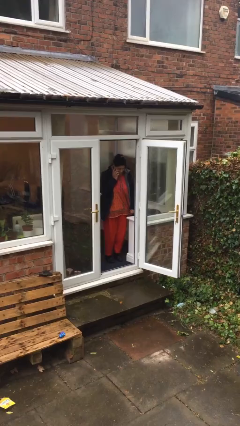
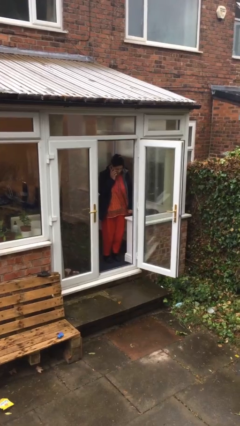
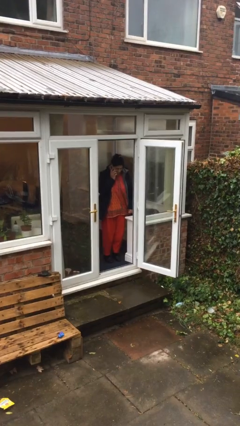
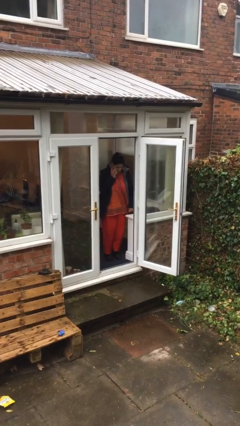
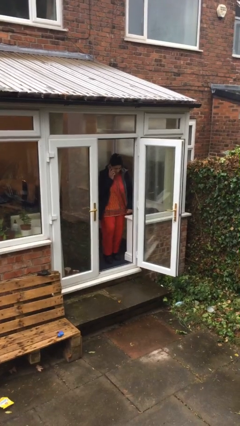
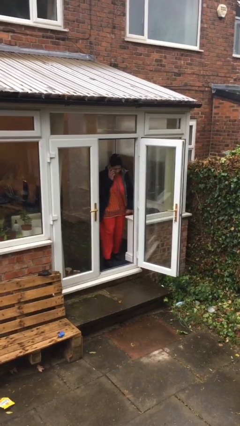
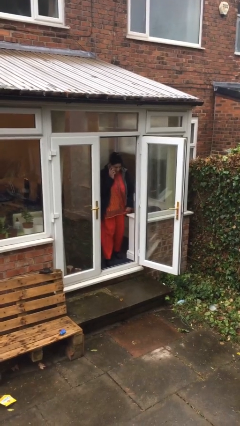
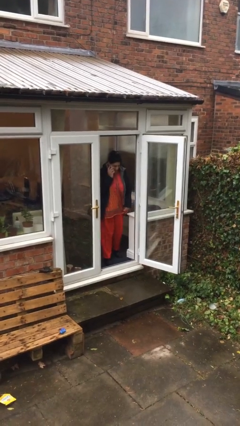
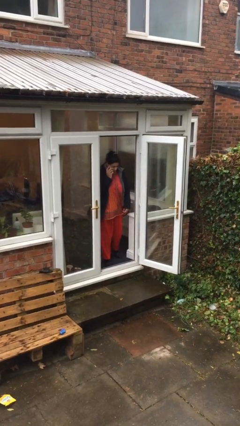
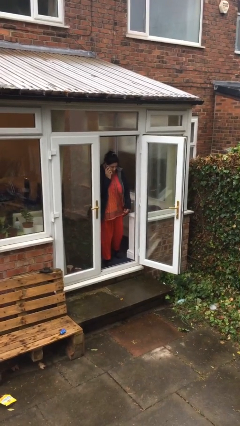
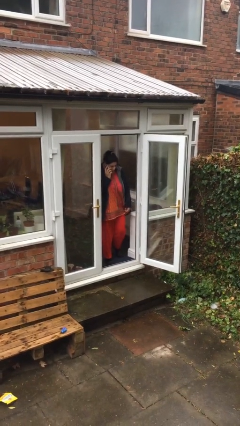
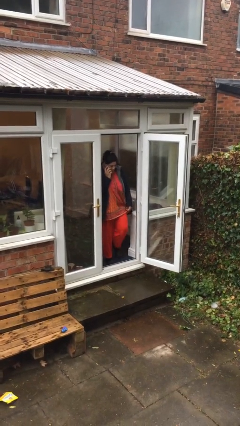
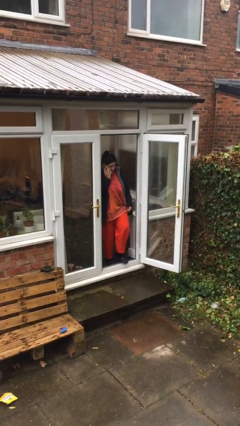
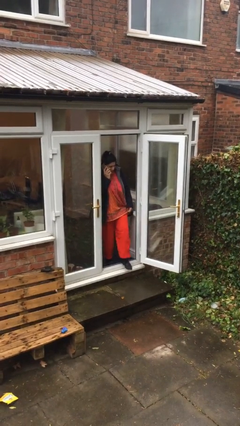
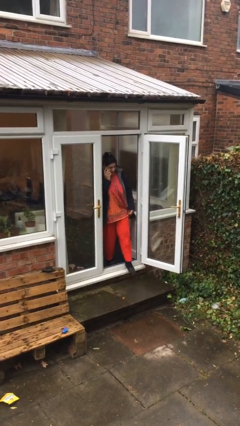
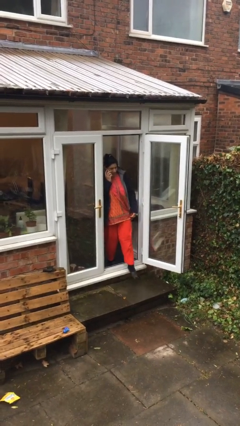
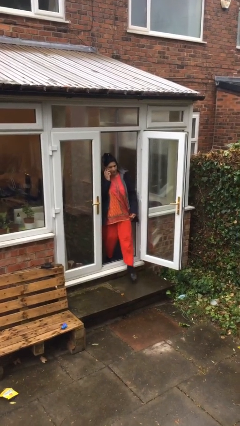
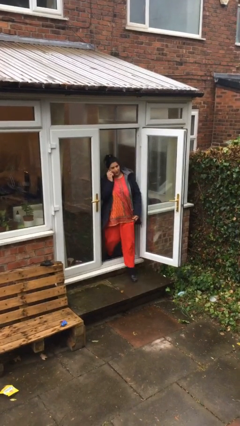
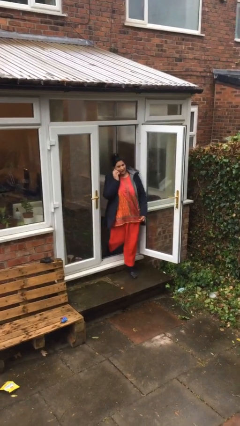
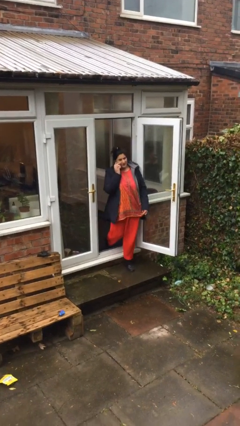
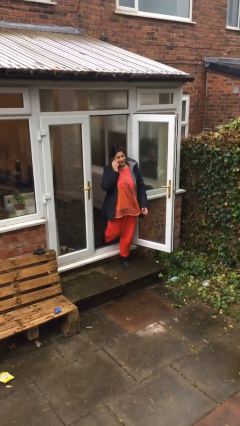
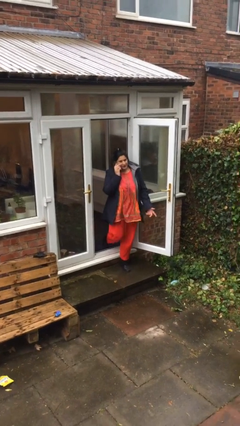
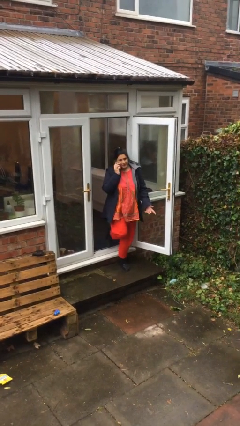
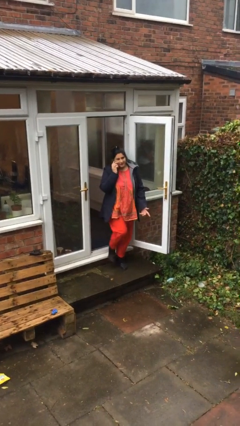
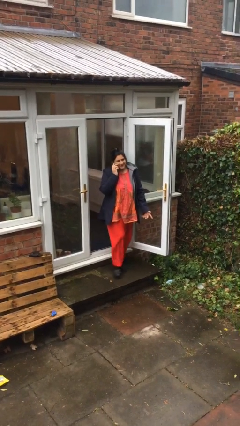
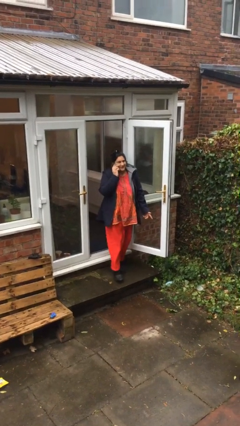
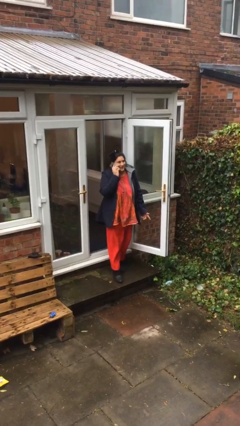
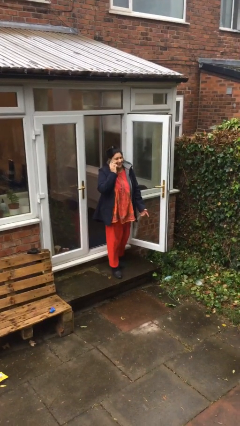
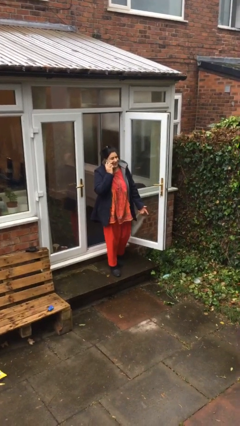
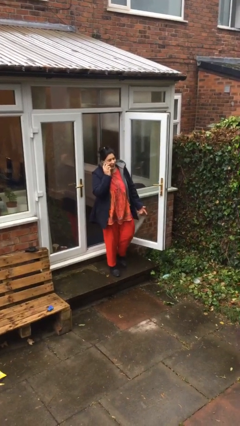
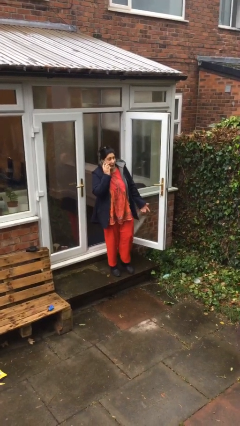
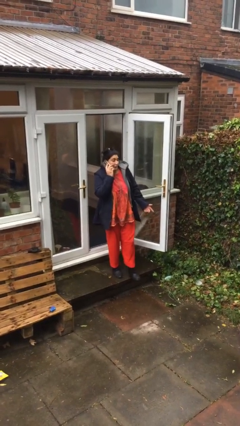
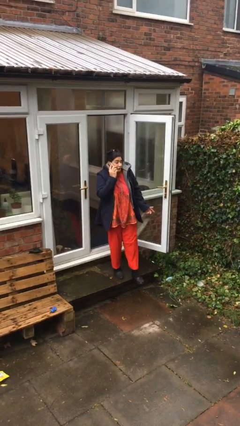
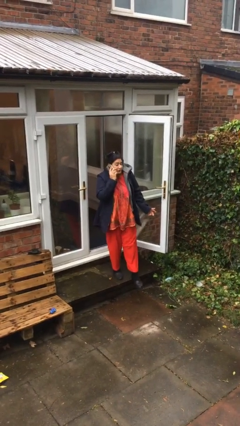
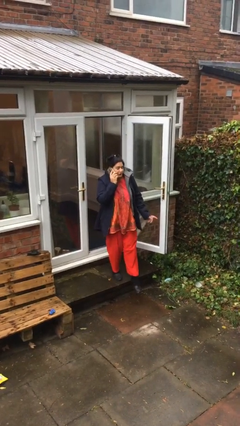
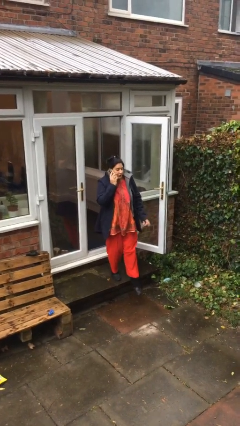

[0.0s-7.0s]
person enters scene through structure

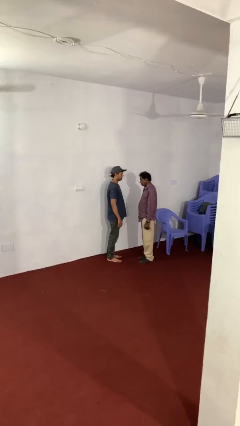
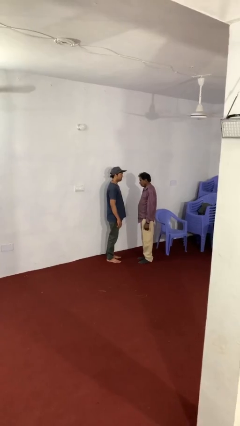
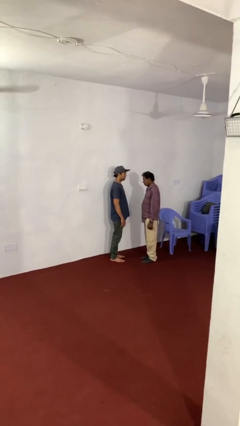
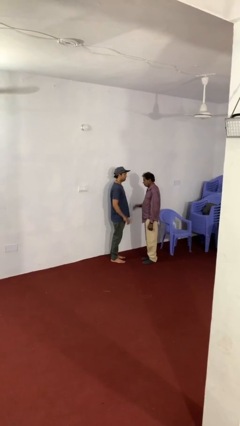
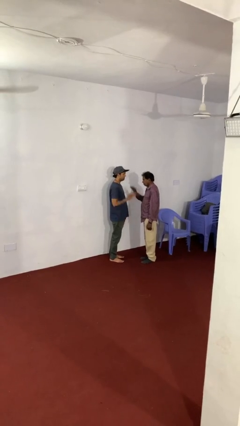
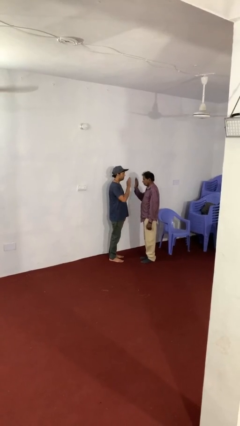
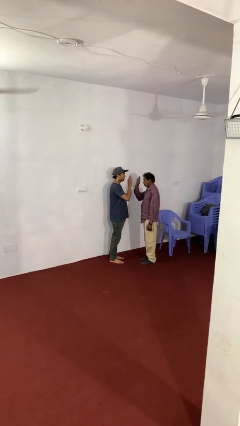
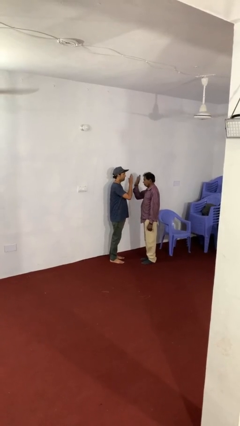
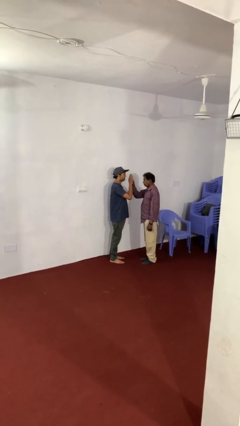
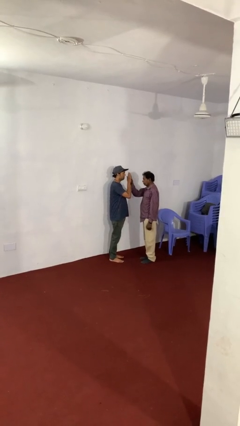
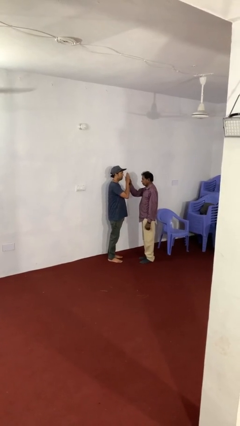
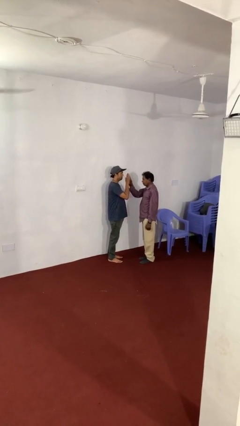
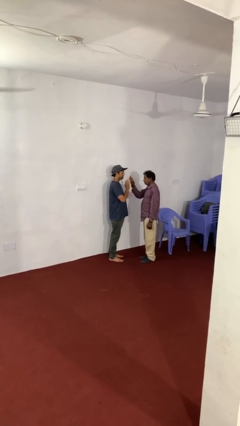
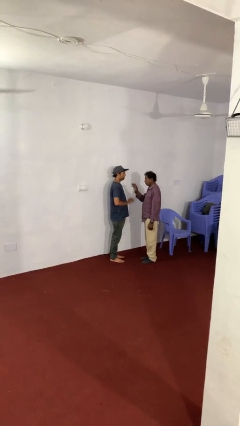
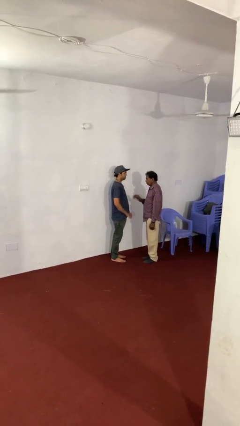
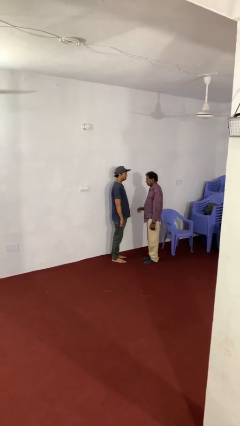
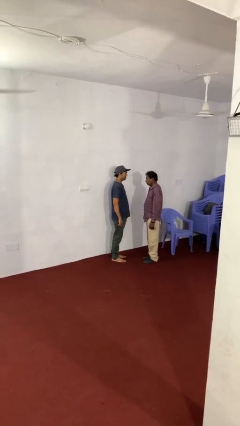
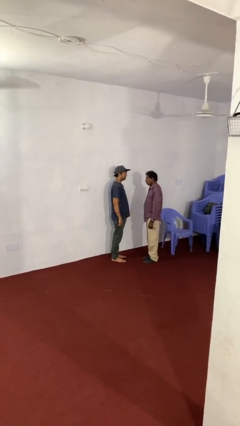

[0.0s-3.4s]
person highfives hand

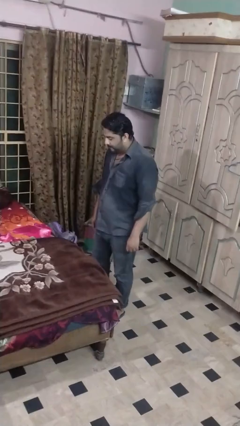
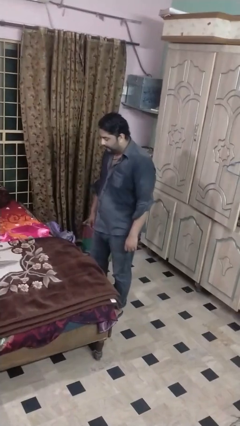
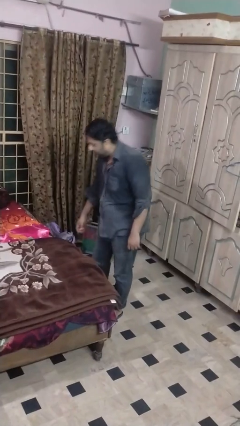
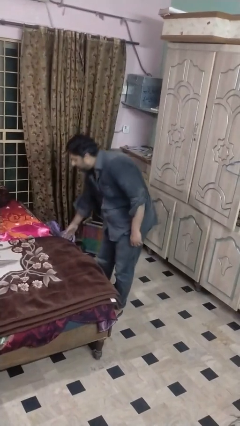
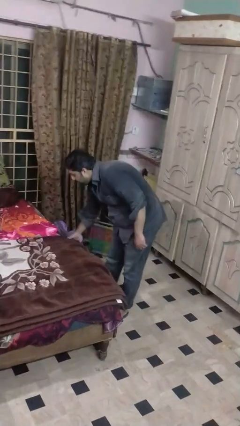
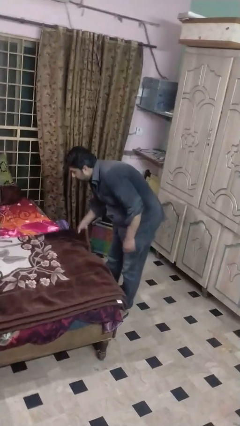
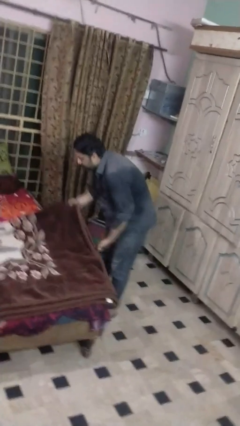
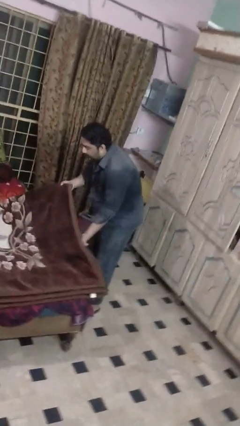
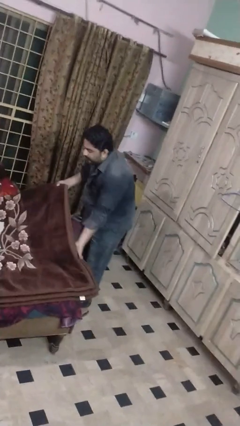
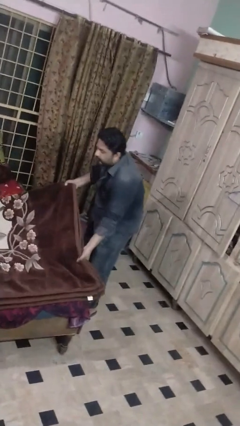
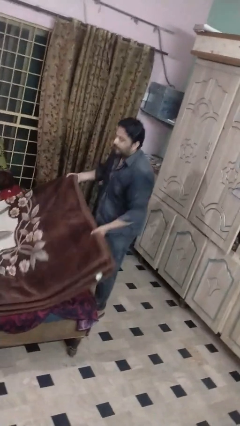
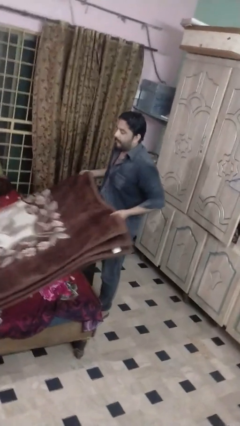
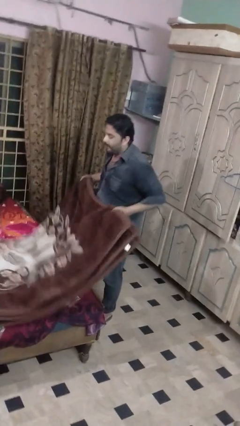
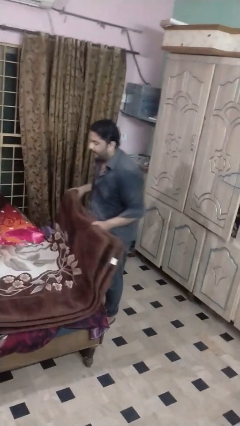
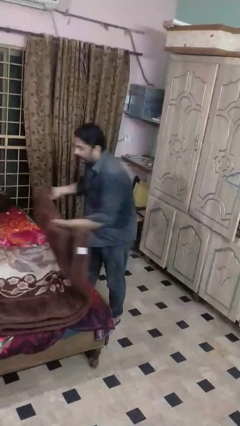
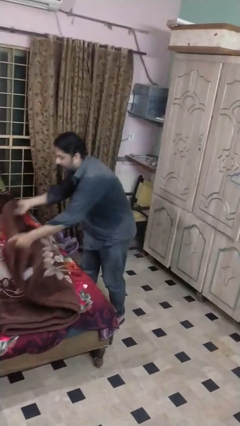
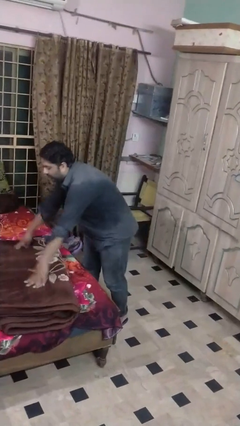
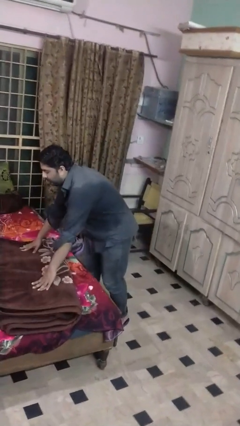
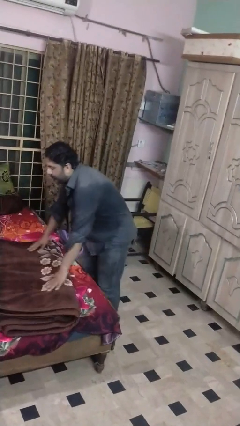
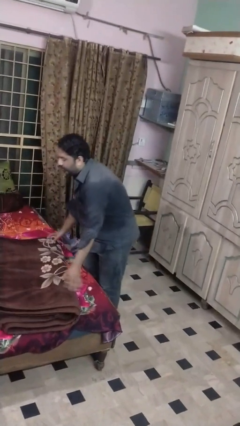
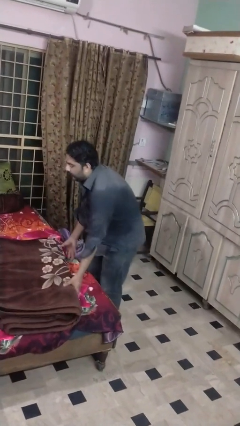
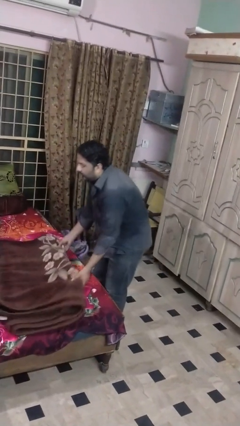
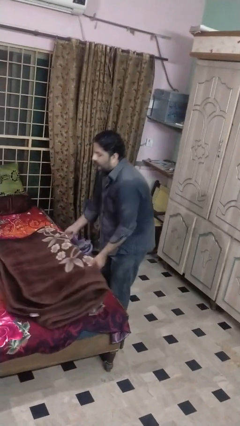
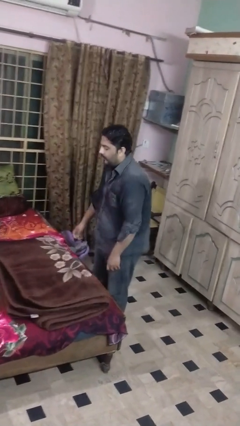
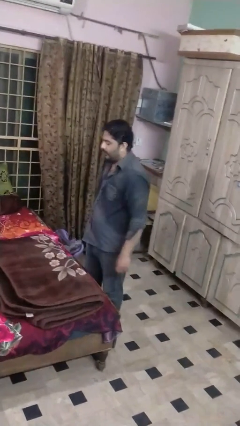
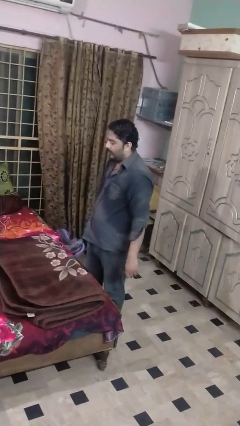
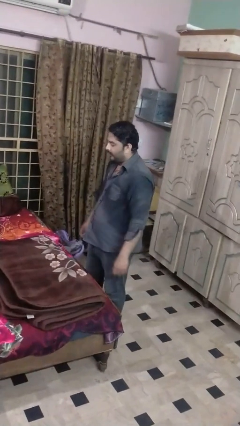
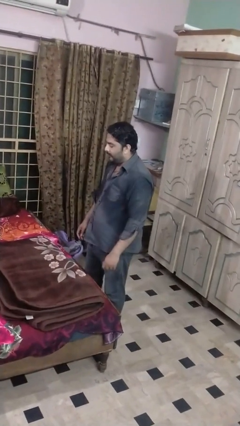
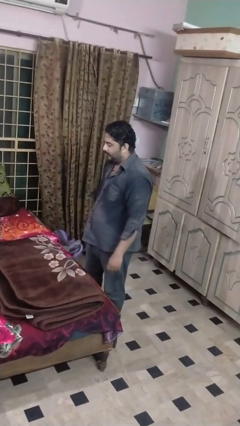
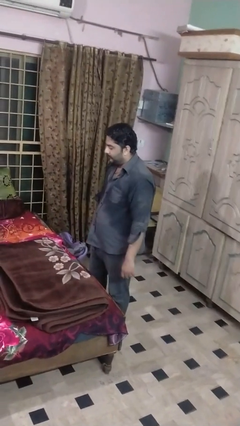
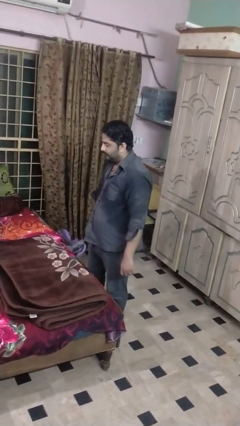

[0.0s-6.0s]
person folds blanket

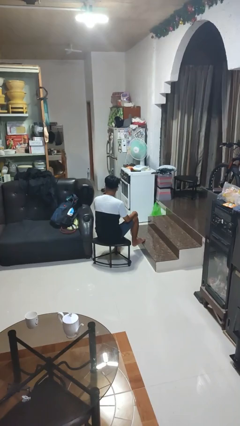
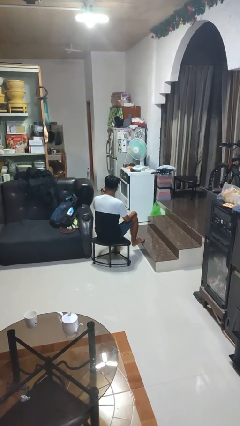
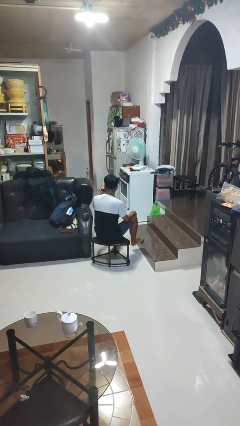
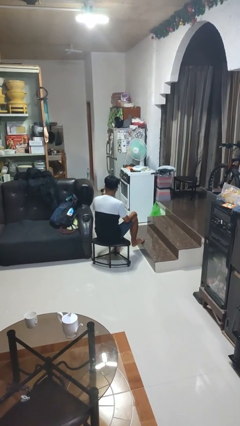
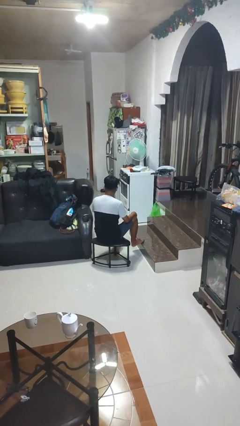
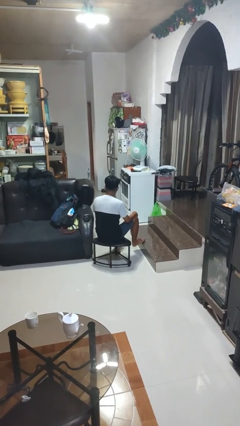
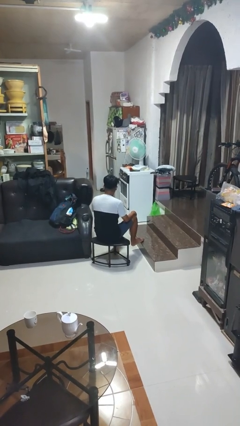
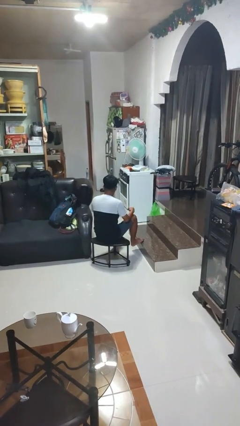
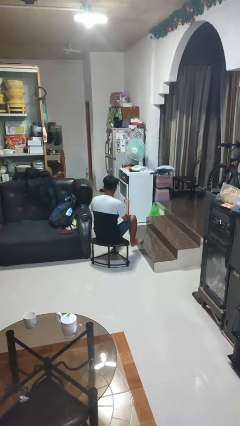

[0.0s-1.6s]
person gestures watch closely
